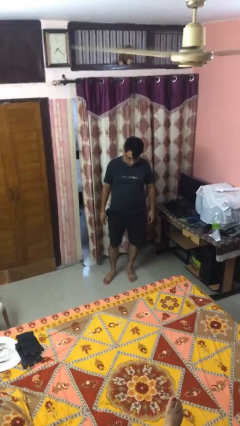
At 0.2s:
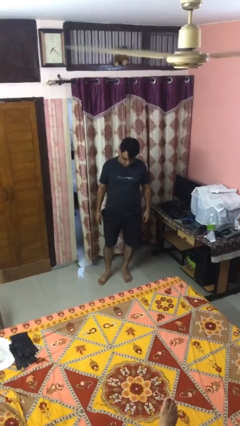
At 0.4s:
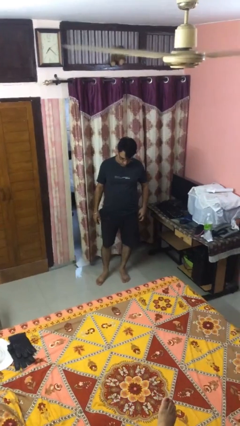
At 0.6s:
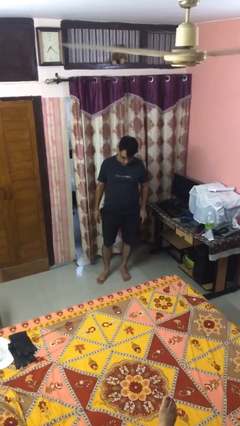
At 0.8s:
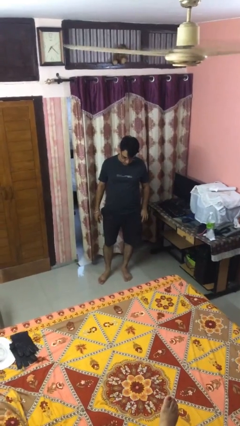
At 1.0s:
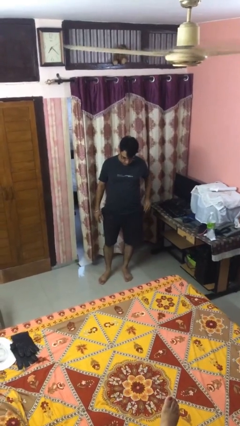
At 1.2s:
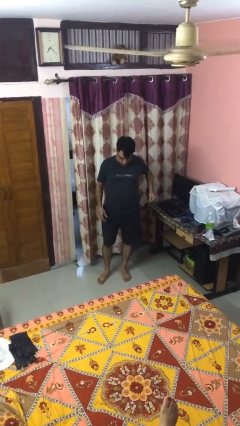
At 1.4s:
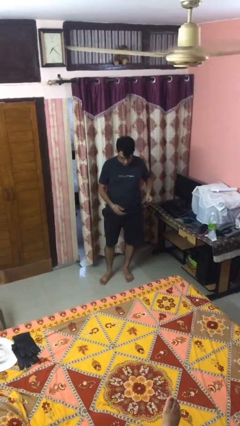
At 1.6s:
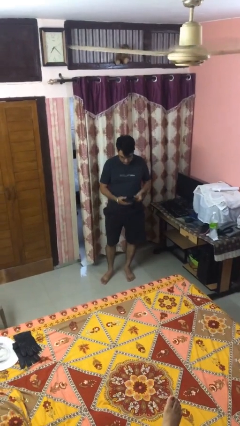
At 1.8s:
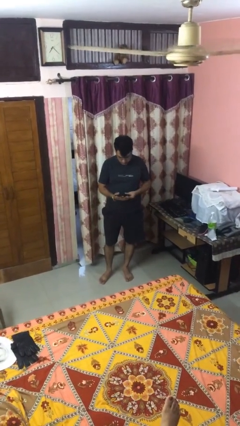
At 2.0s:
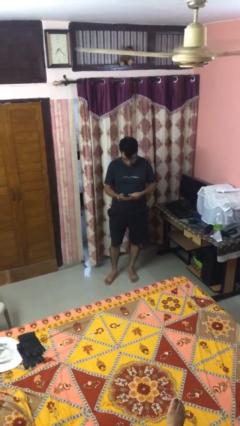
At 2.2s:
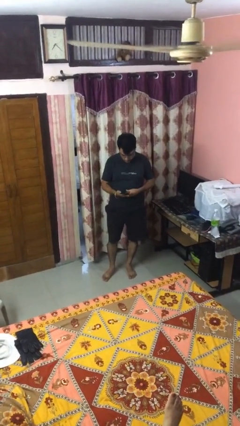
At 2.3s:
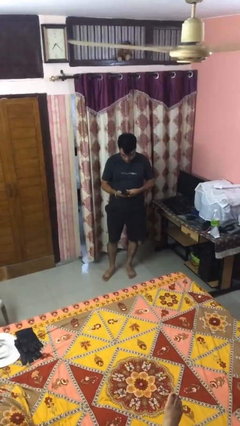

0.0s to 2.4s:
person takes phone from pocket

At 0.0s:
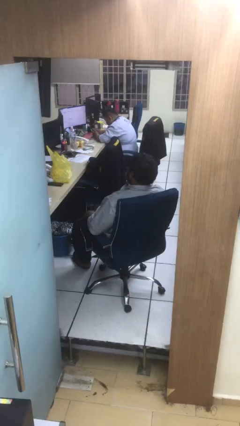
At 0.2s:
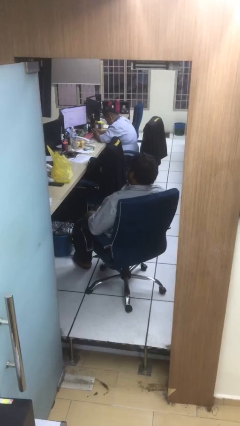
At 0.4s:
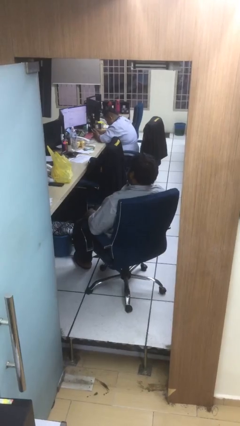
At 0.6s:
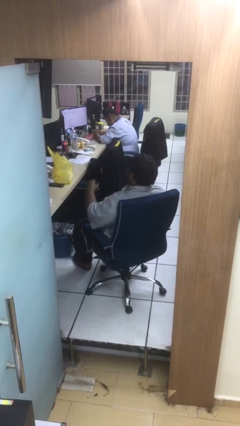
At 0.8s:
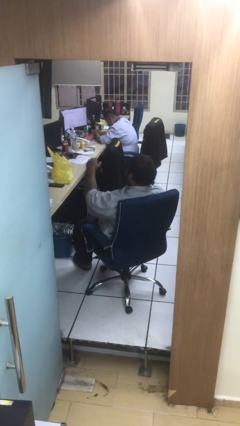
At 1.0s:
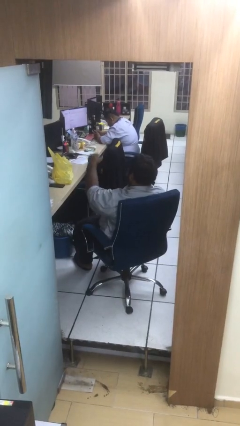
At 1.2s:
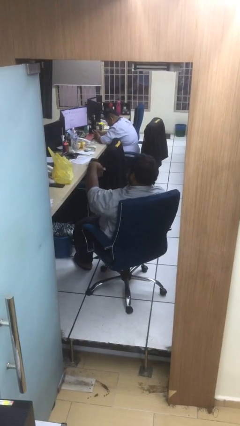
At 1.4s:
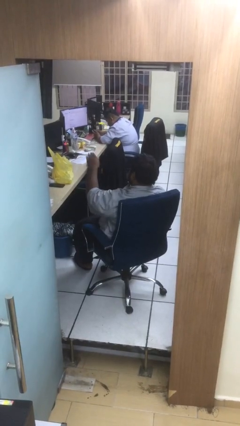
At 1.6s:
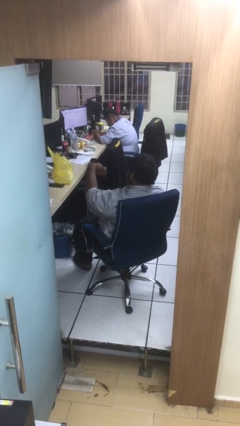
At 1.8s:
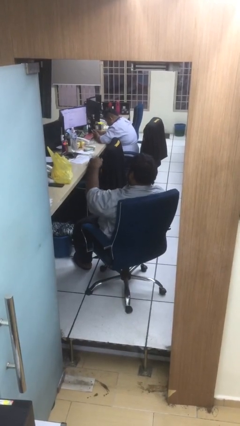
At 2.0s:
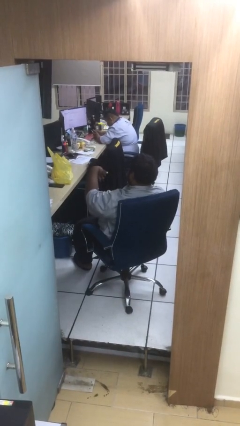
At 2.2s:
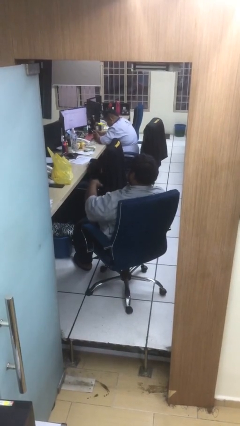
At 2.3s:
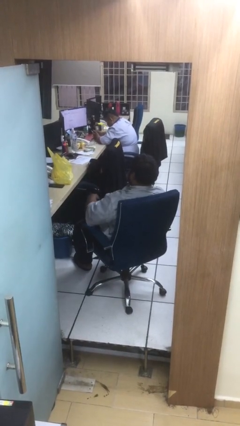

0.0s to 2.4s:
person gestures come here

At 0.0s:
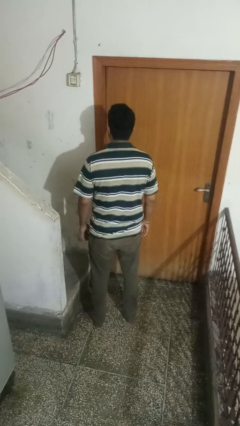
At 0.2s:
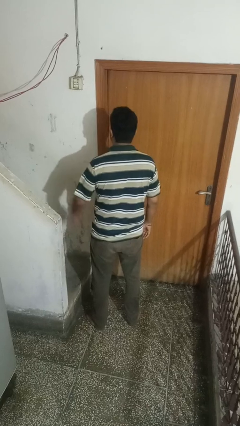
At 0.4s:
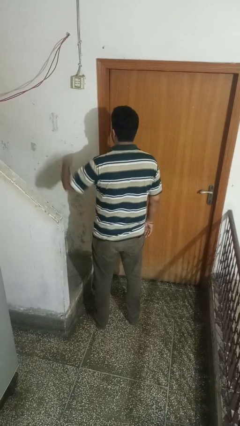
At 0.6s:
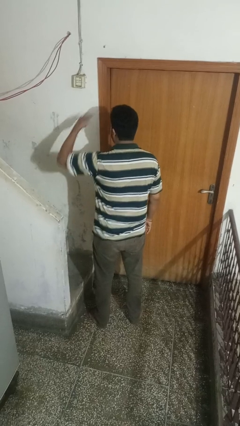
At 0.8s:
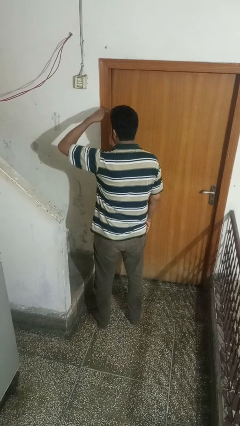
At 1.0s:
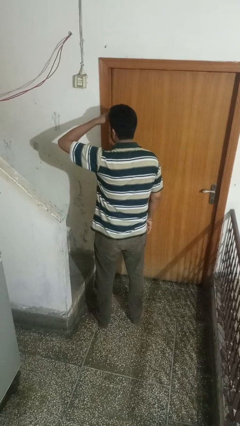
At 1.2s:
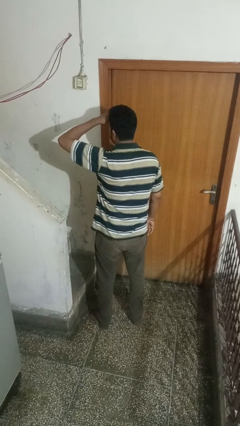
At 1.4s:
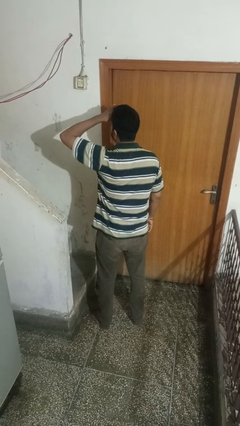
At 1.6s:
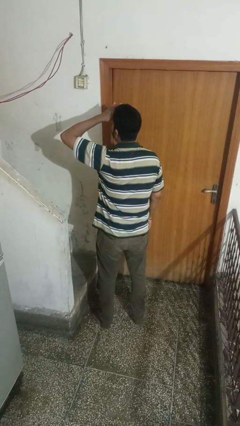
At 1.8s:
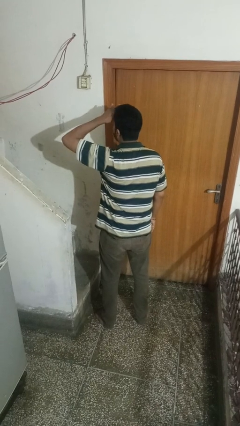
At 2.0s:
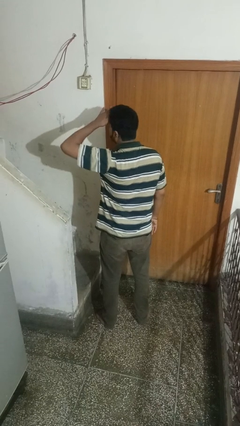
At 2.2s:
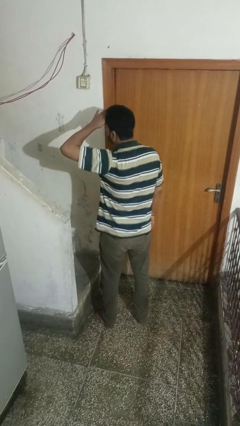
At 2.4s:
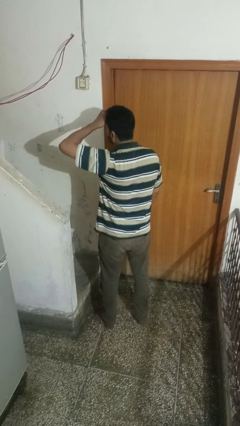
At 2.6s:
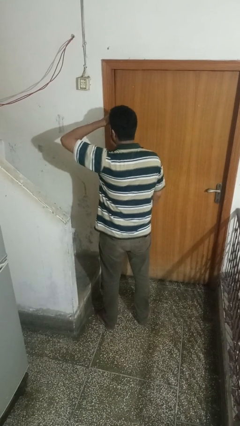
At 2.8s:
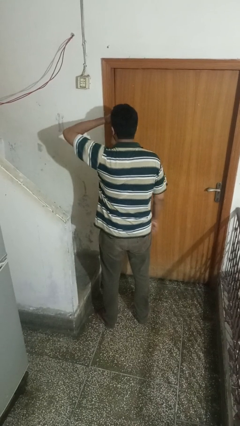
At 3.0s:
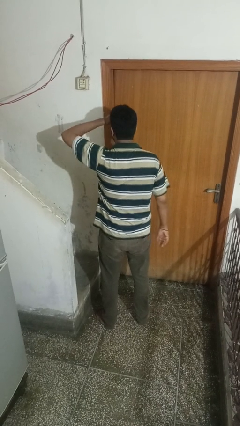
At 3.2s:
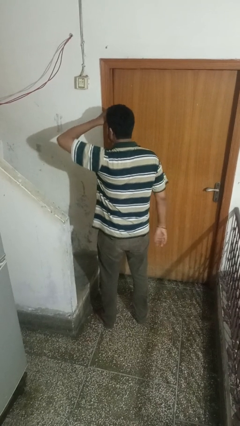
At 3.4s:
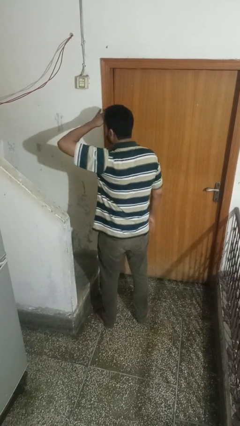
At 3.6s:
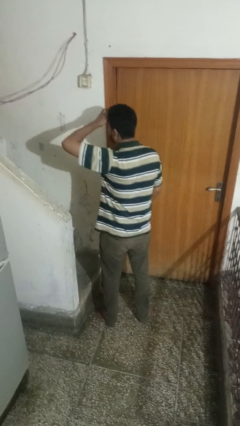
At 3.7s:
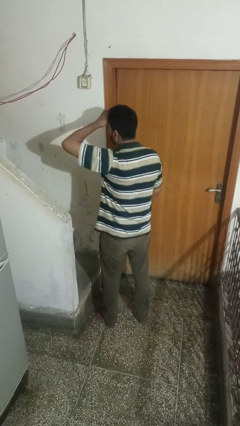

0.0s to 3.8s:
person shades eyes

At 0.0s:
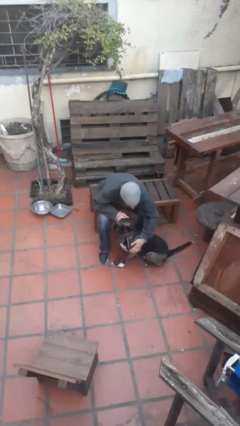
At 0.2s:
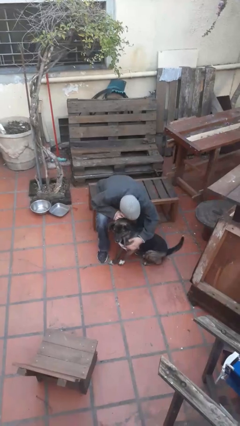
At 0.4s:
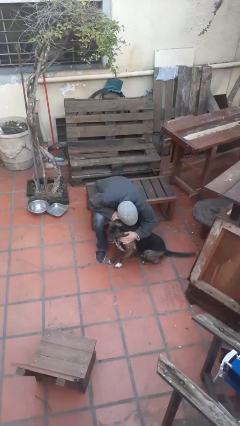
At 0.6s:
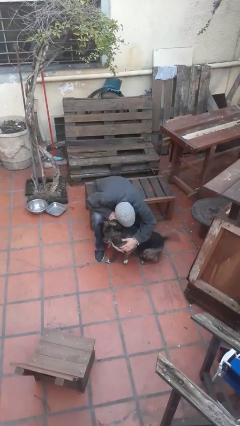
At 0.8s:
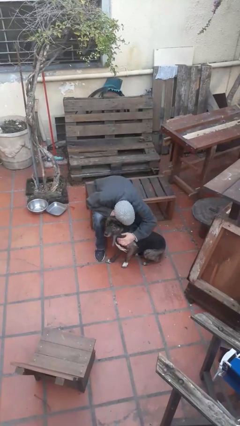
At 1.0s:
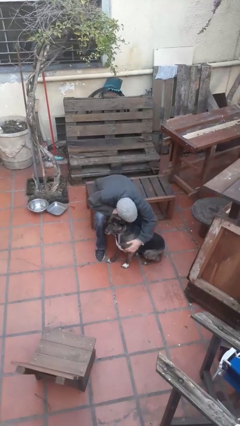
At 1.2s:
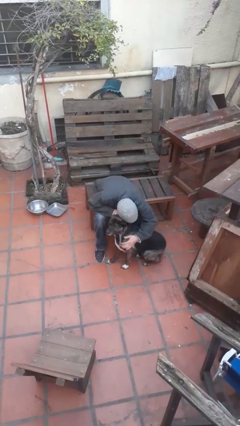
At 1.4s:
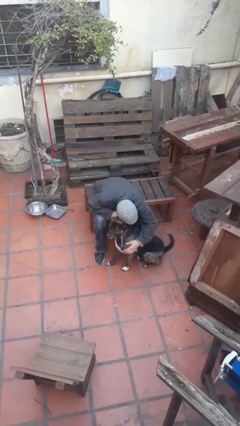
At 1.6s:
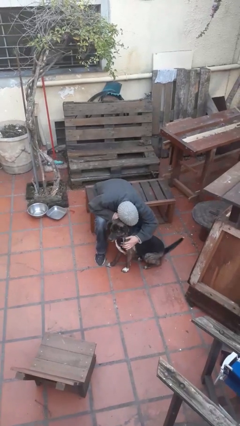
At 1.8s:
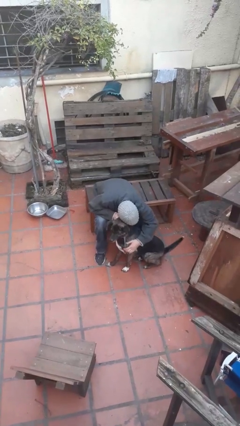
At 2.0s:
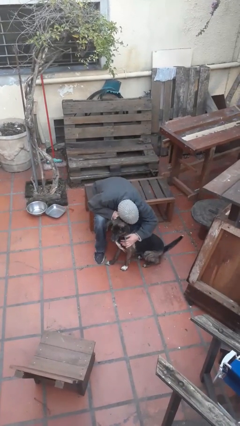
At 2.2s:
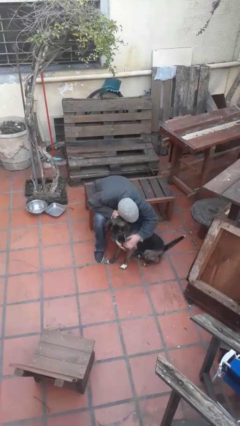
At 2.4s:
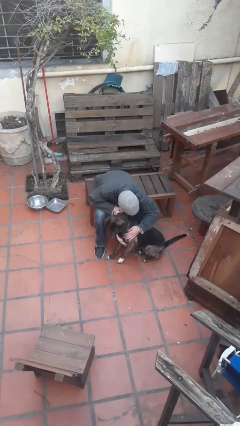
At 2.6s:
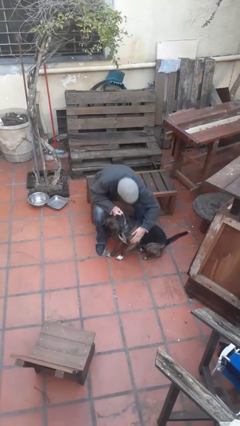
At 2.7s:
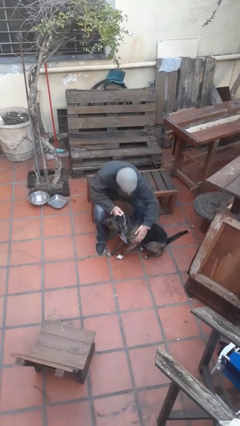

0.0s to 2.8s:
person hugs dog

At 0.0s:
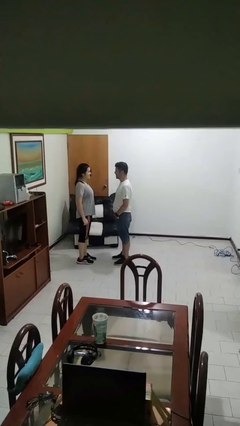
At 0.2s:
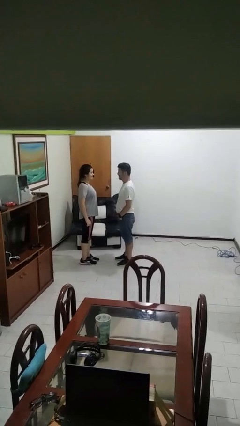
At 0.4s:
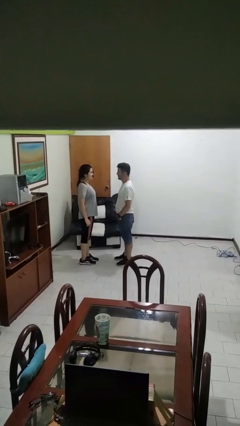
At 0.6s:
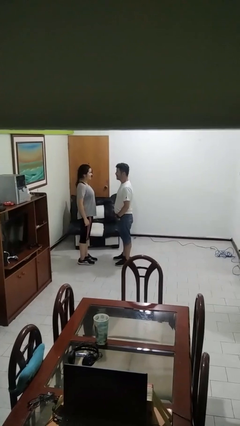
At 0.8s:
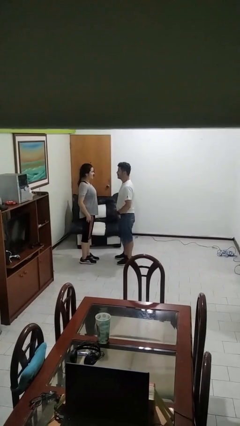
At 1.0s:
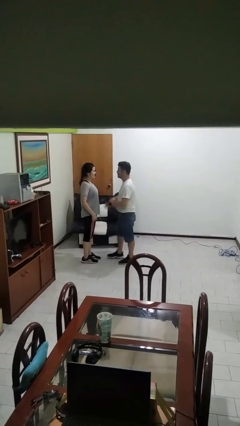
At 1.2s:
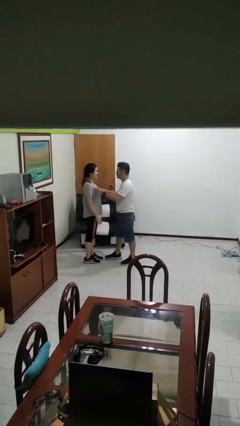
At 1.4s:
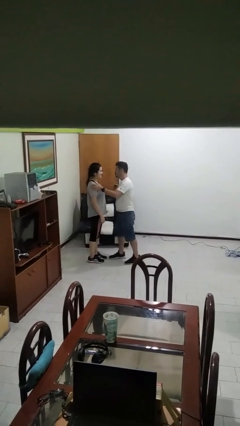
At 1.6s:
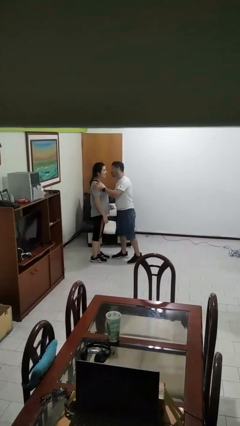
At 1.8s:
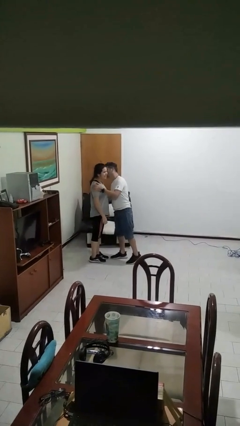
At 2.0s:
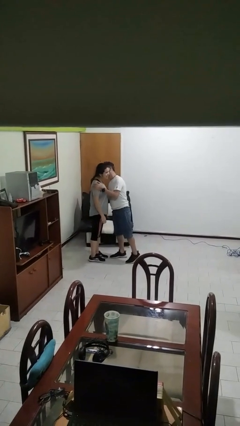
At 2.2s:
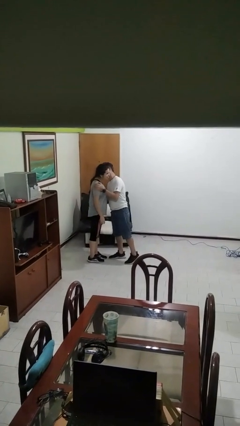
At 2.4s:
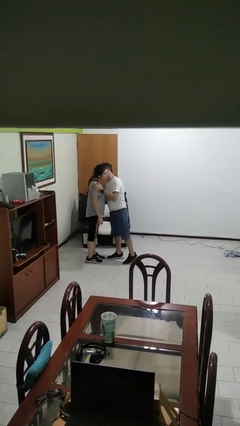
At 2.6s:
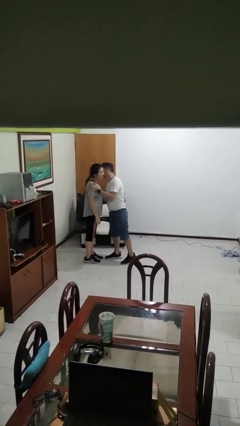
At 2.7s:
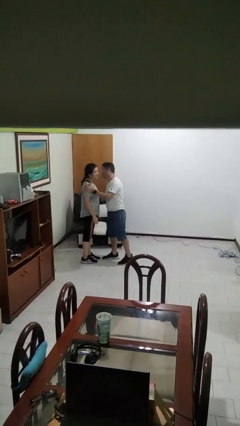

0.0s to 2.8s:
person kisses cheek of person

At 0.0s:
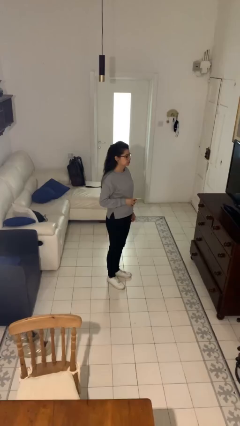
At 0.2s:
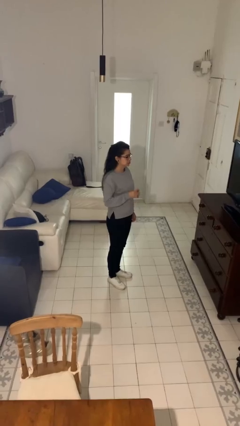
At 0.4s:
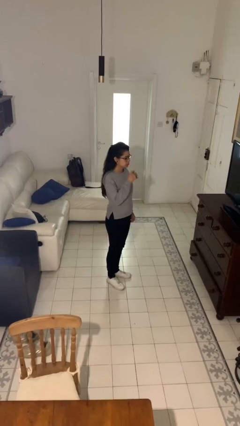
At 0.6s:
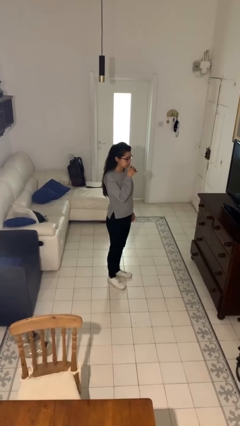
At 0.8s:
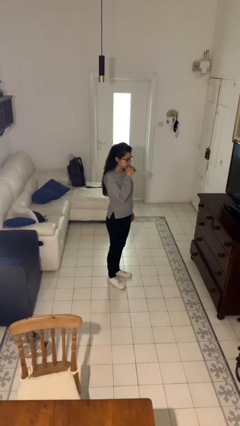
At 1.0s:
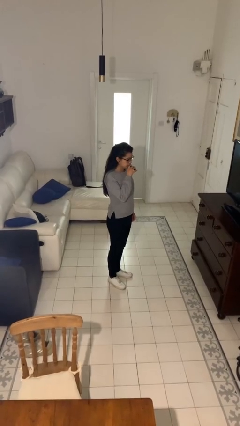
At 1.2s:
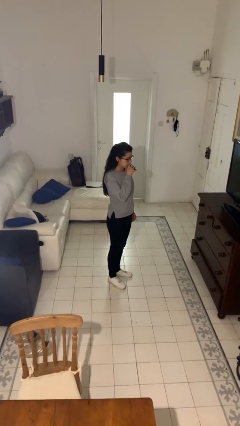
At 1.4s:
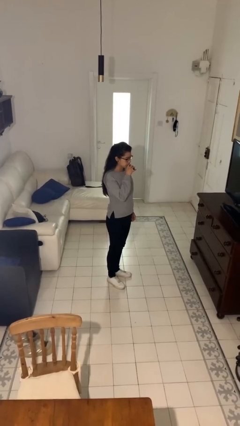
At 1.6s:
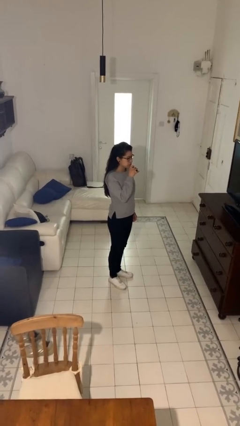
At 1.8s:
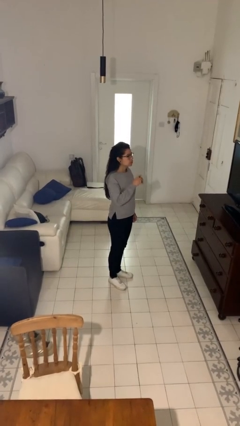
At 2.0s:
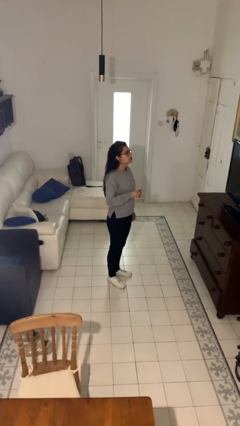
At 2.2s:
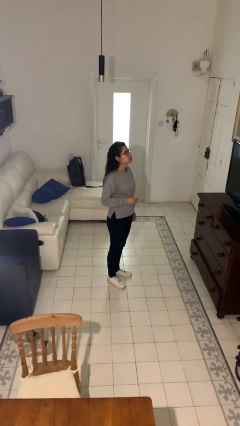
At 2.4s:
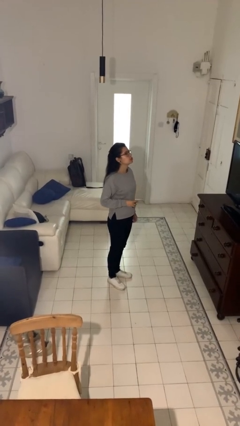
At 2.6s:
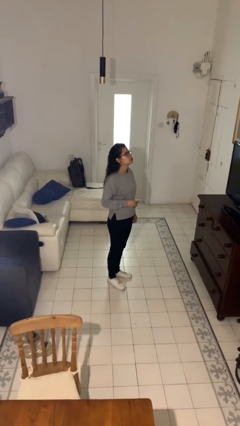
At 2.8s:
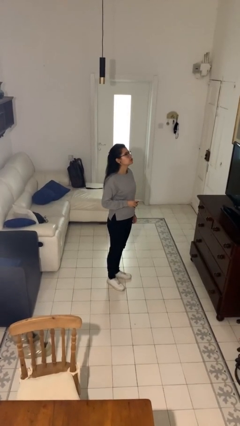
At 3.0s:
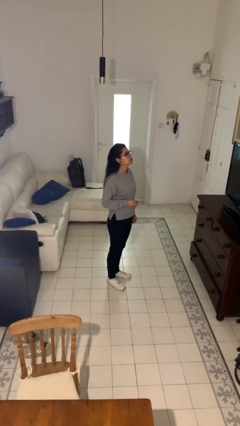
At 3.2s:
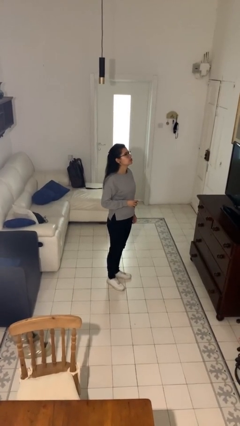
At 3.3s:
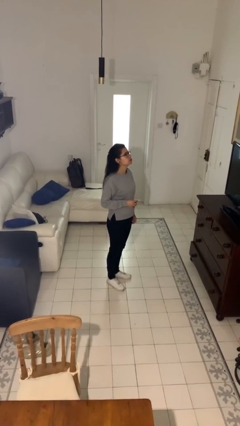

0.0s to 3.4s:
person vapes
